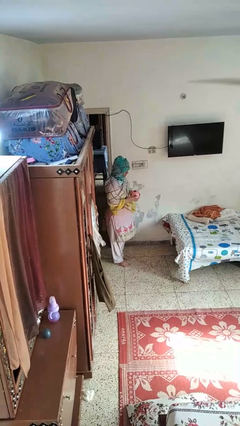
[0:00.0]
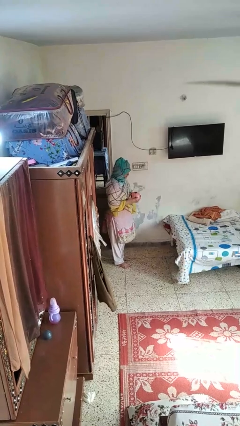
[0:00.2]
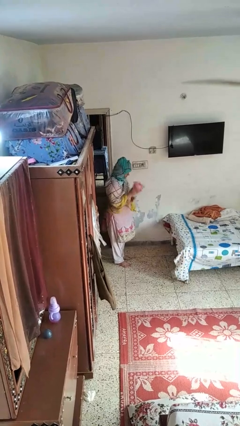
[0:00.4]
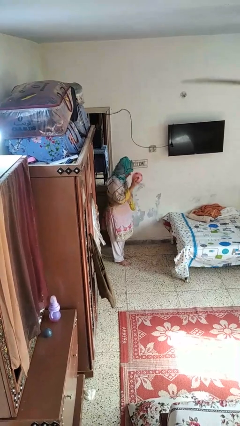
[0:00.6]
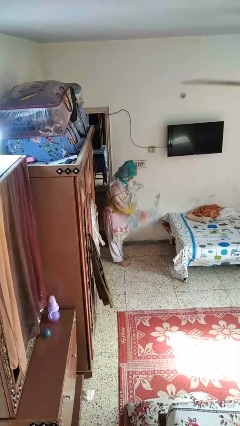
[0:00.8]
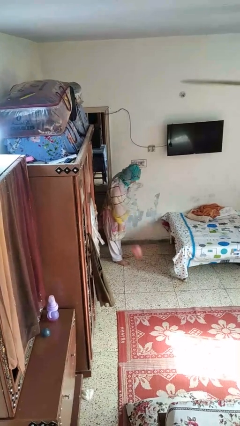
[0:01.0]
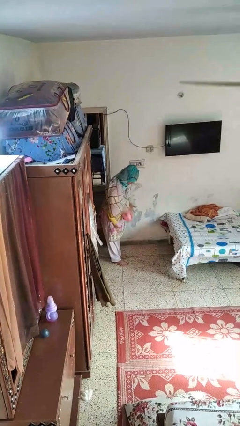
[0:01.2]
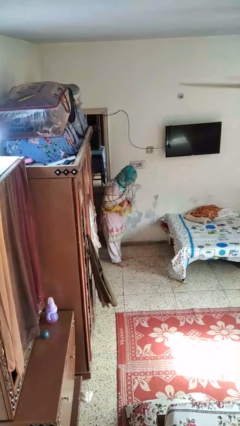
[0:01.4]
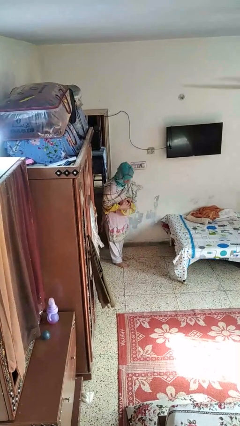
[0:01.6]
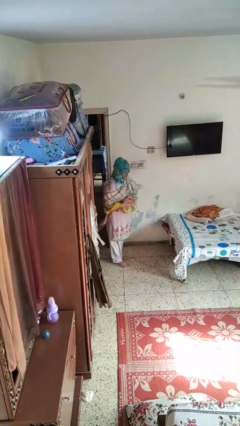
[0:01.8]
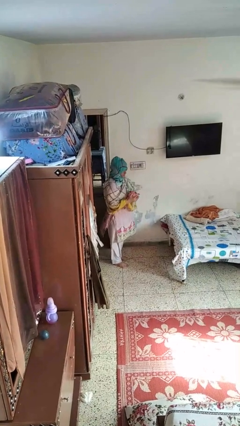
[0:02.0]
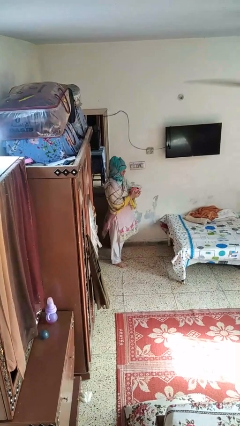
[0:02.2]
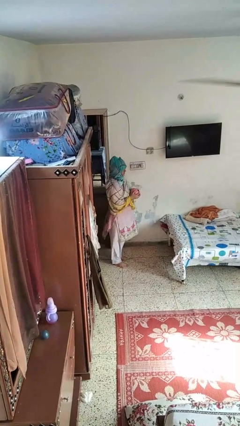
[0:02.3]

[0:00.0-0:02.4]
person bounces ball on floor

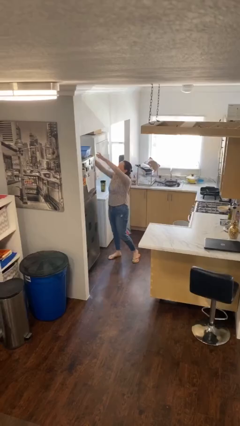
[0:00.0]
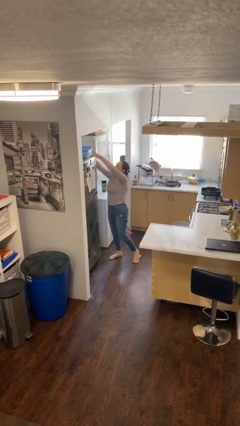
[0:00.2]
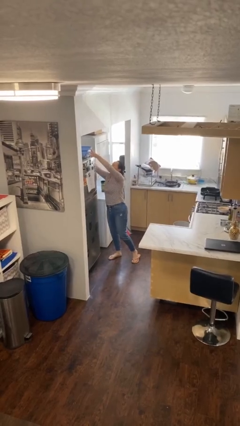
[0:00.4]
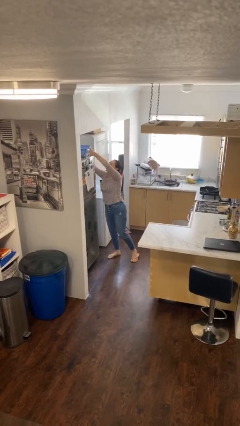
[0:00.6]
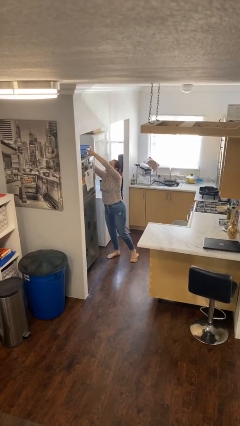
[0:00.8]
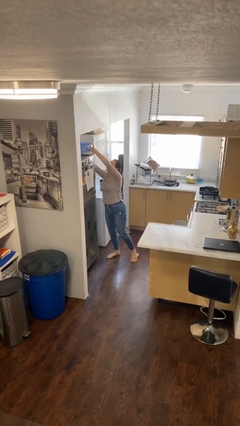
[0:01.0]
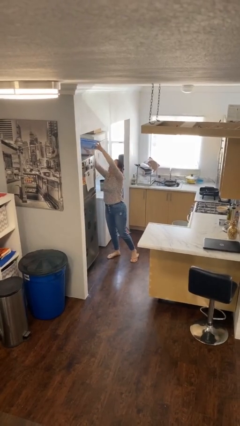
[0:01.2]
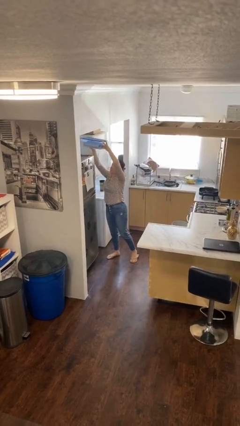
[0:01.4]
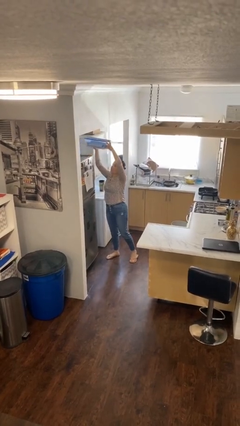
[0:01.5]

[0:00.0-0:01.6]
person picks up object from shelf

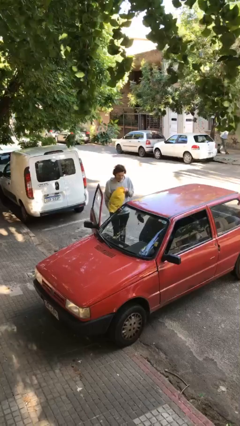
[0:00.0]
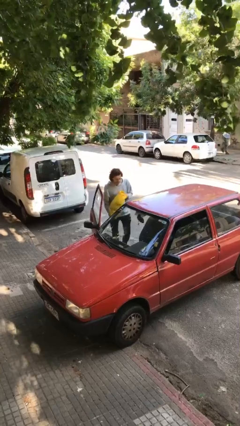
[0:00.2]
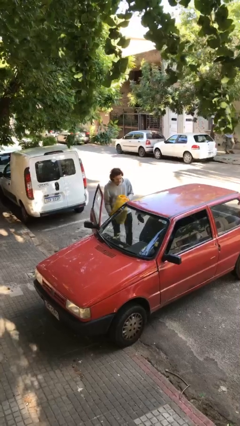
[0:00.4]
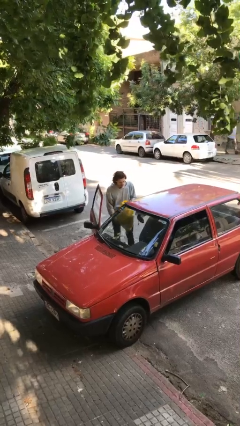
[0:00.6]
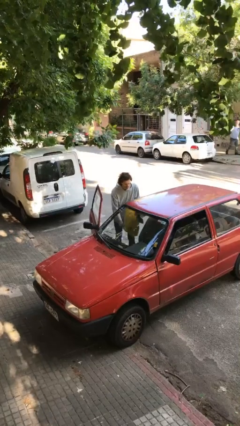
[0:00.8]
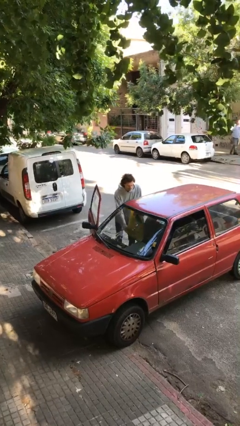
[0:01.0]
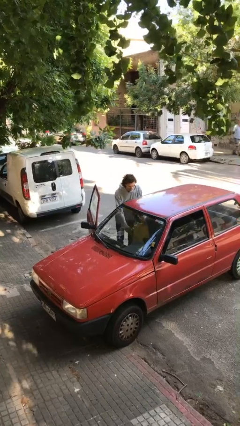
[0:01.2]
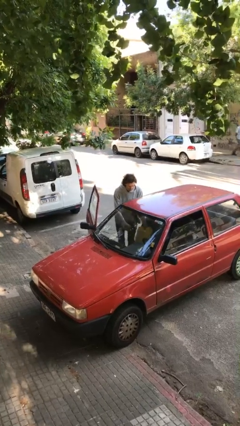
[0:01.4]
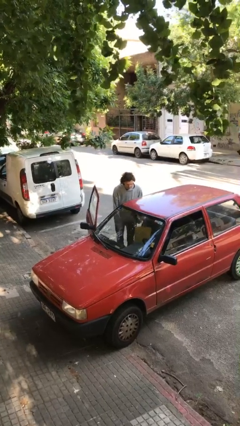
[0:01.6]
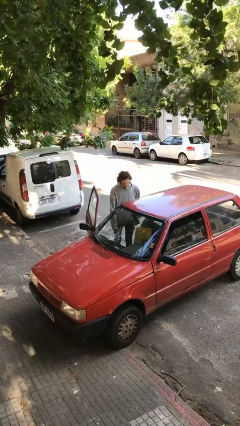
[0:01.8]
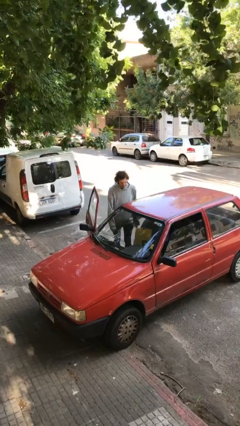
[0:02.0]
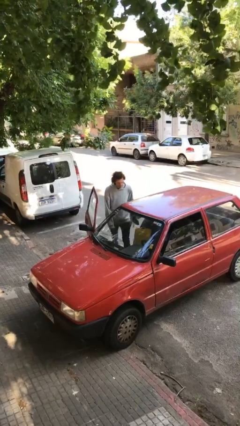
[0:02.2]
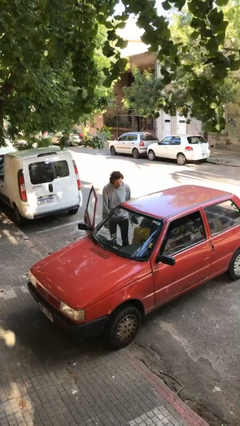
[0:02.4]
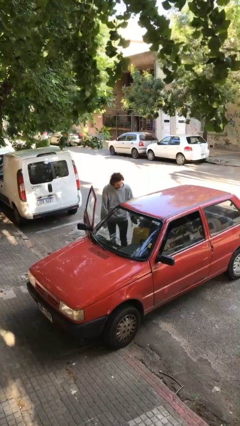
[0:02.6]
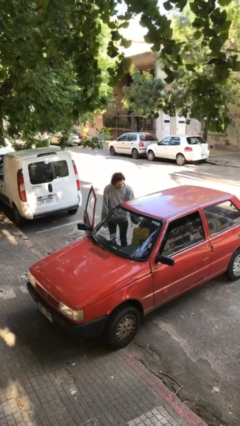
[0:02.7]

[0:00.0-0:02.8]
person loads car

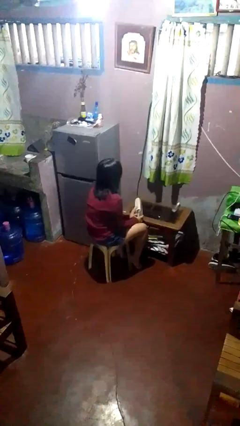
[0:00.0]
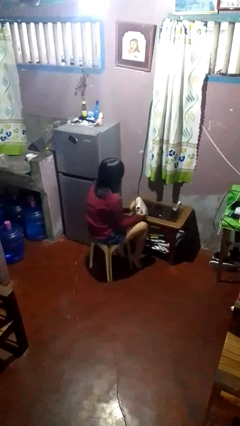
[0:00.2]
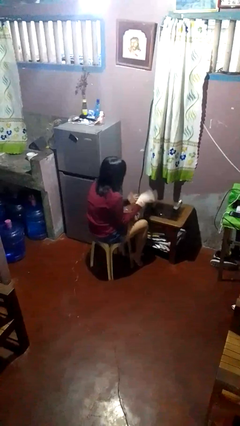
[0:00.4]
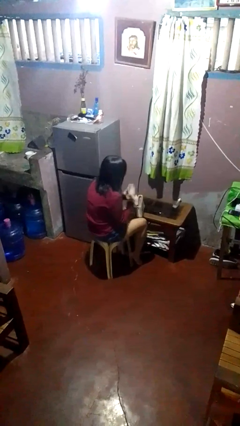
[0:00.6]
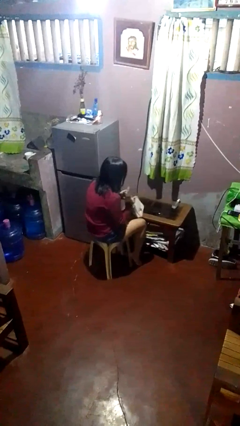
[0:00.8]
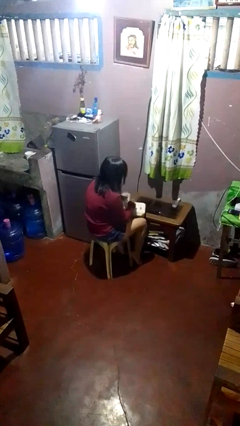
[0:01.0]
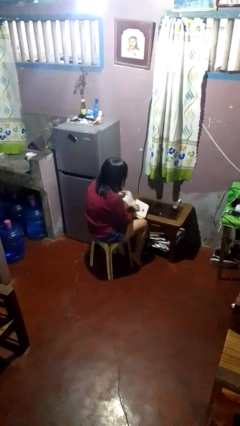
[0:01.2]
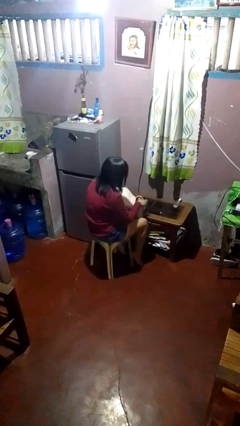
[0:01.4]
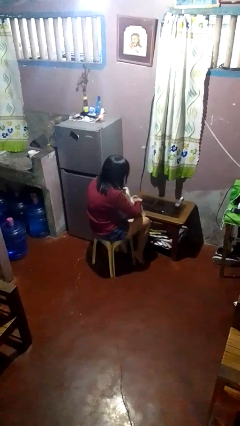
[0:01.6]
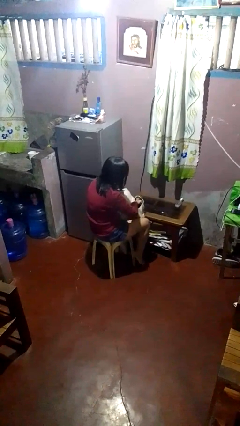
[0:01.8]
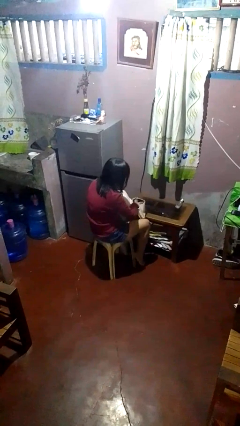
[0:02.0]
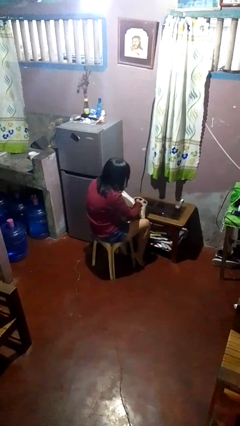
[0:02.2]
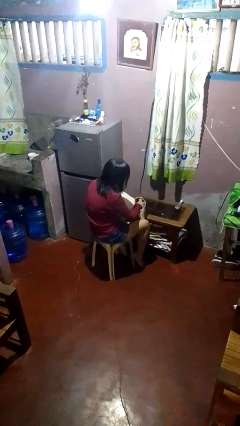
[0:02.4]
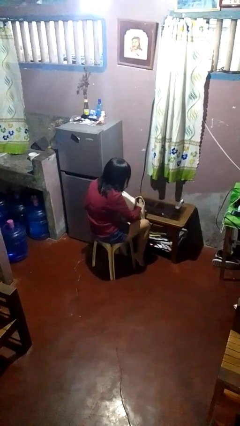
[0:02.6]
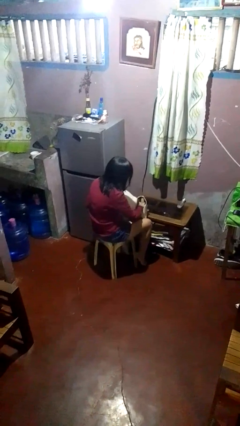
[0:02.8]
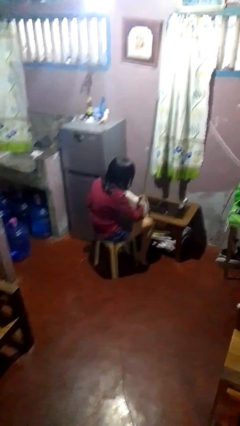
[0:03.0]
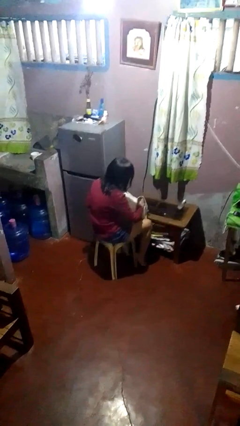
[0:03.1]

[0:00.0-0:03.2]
person searches in purse

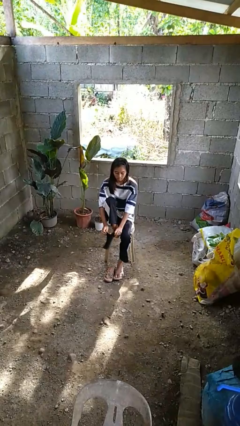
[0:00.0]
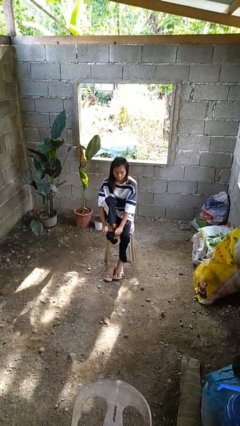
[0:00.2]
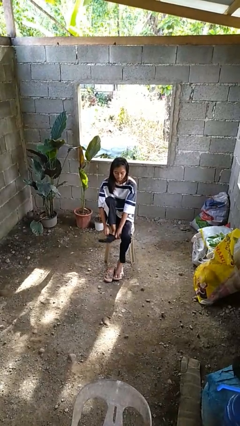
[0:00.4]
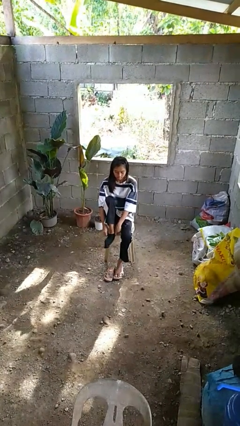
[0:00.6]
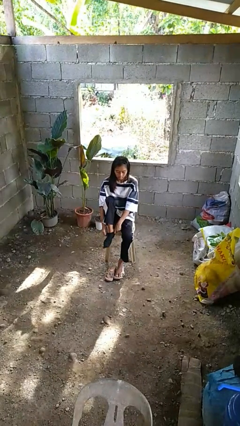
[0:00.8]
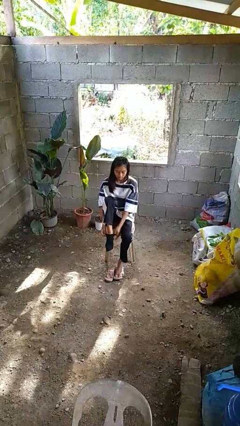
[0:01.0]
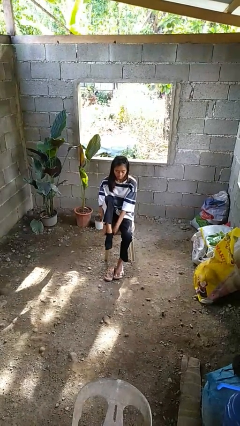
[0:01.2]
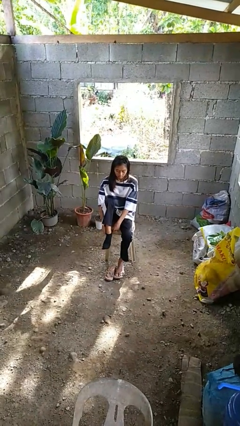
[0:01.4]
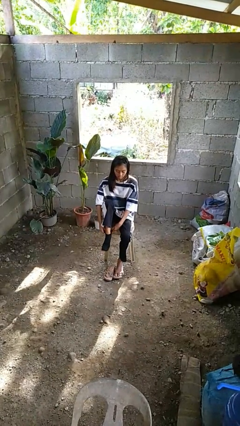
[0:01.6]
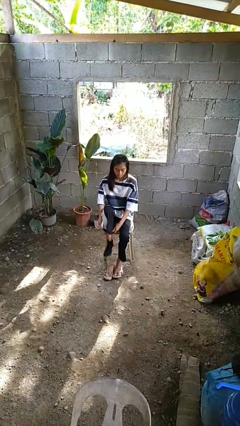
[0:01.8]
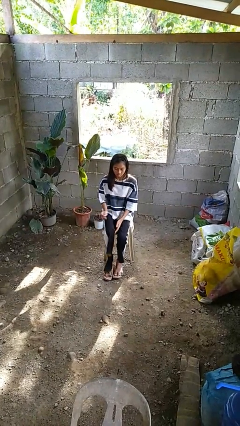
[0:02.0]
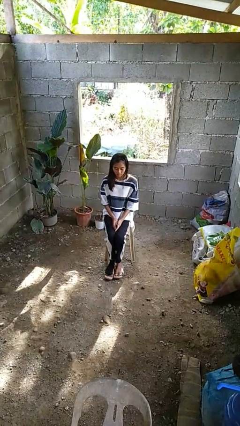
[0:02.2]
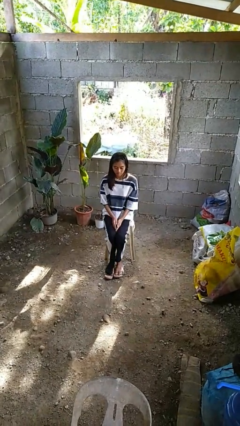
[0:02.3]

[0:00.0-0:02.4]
person puts on socks

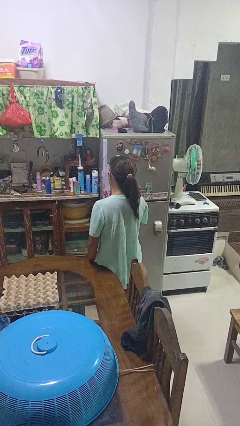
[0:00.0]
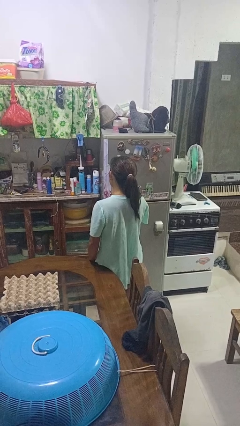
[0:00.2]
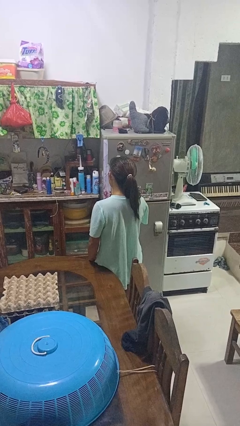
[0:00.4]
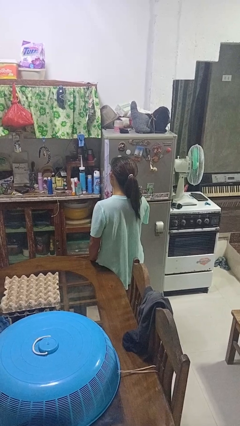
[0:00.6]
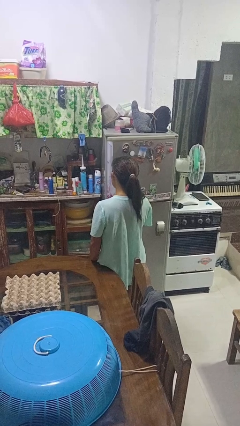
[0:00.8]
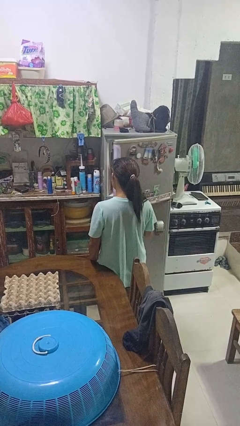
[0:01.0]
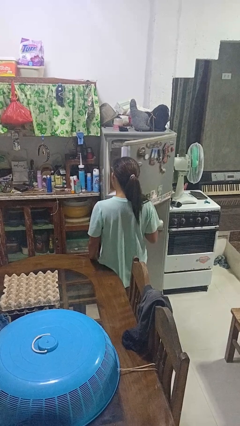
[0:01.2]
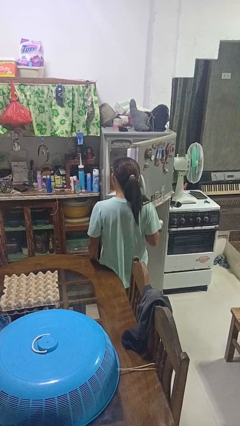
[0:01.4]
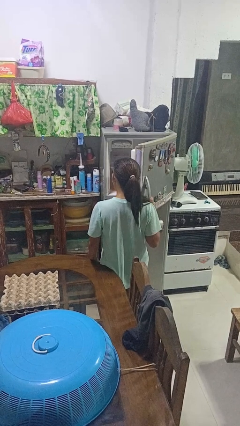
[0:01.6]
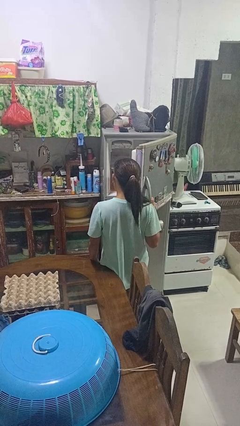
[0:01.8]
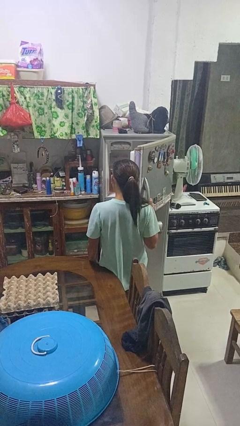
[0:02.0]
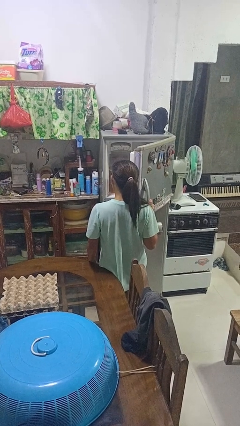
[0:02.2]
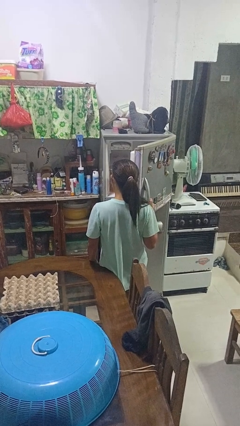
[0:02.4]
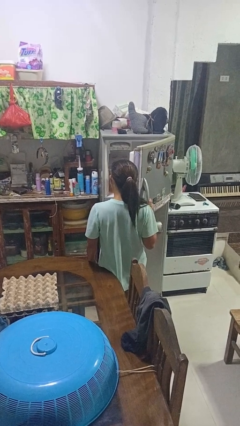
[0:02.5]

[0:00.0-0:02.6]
person opens refrigerator

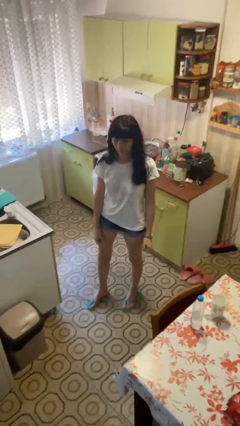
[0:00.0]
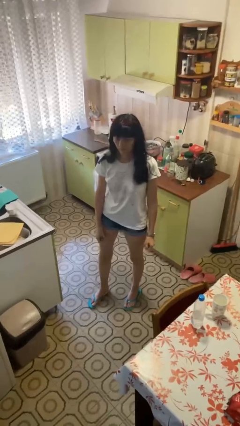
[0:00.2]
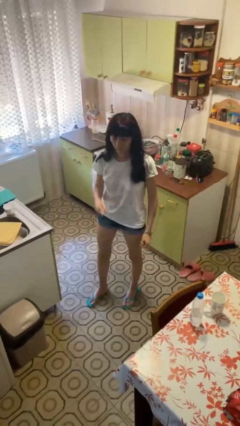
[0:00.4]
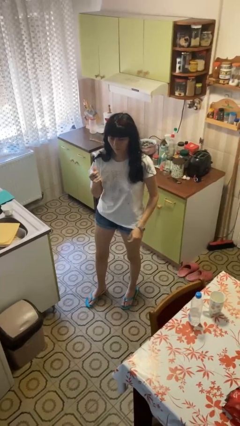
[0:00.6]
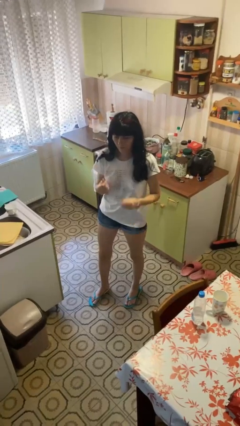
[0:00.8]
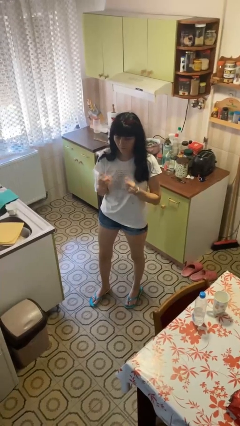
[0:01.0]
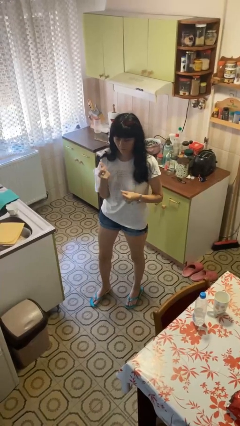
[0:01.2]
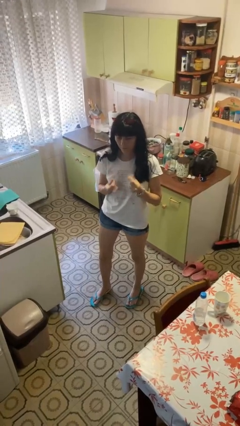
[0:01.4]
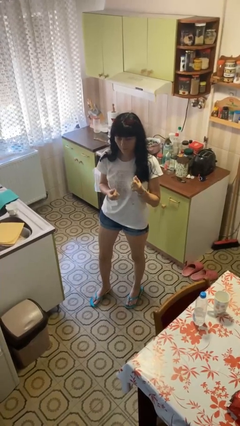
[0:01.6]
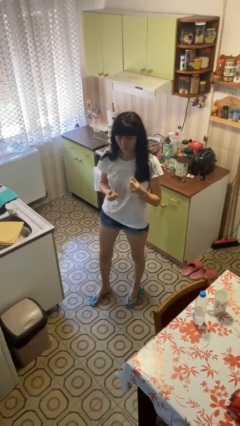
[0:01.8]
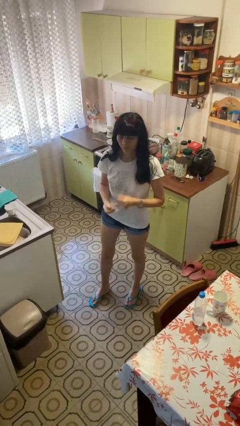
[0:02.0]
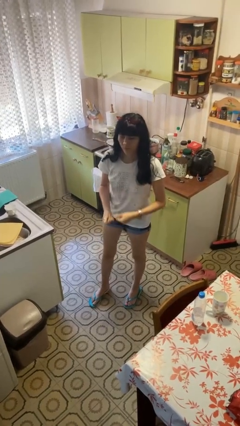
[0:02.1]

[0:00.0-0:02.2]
person snaps fingers
